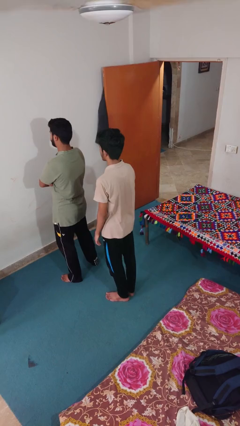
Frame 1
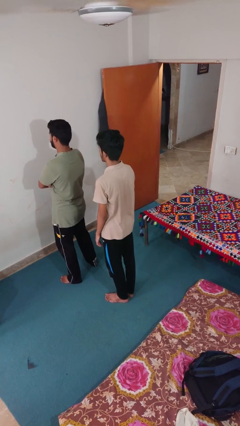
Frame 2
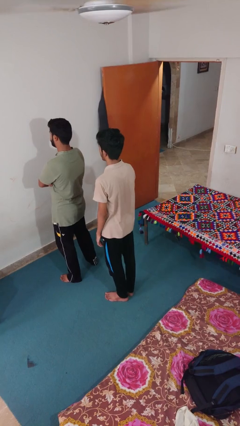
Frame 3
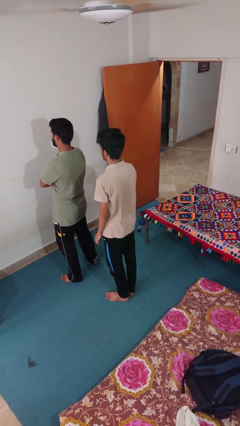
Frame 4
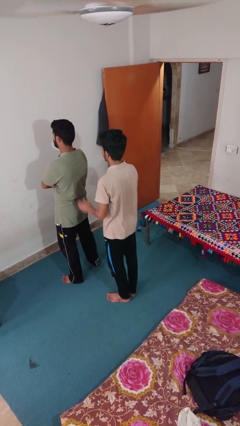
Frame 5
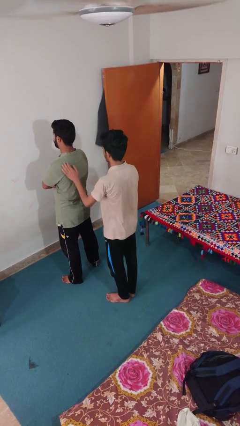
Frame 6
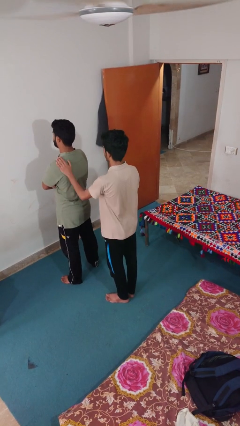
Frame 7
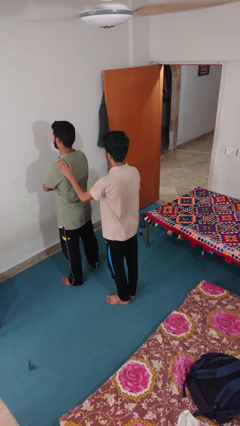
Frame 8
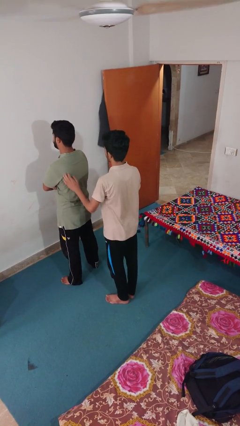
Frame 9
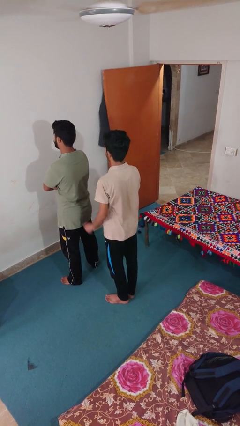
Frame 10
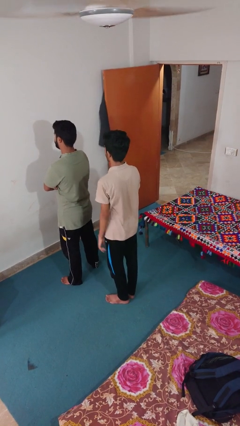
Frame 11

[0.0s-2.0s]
person touches back of person

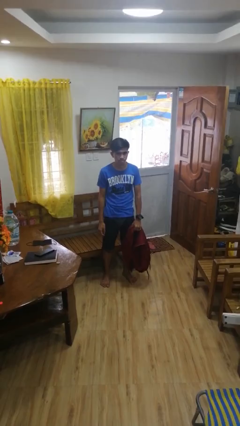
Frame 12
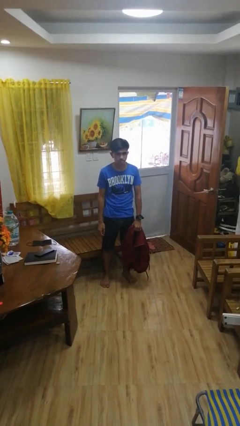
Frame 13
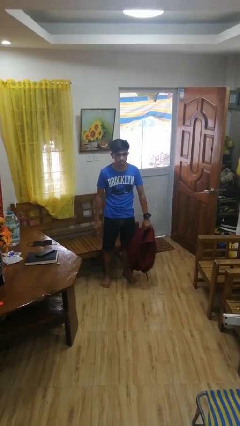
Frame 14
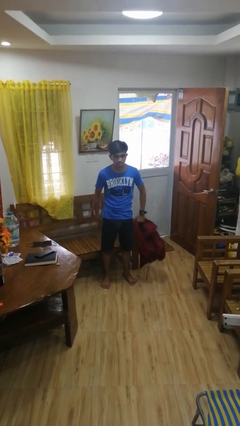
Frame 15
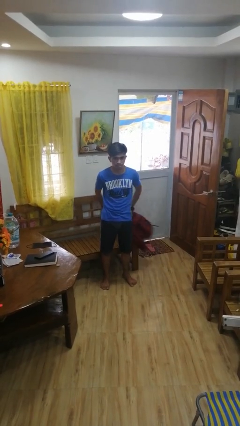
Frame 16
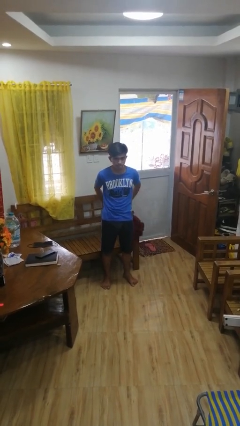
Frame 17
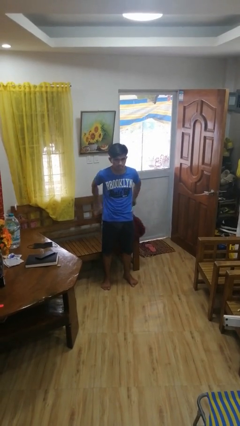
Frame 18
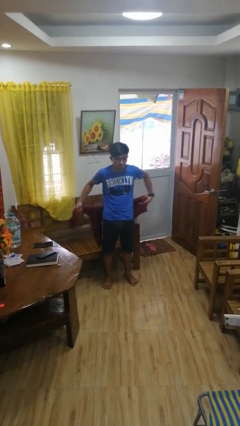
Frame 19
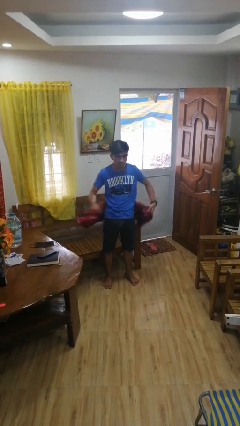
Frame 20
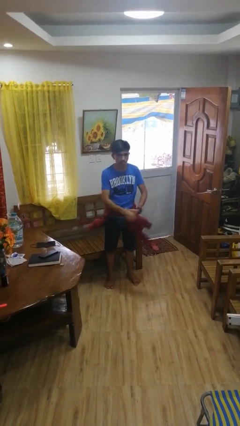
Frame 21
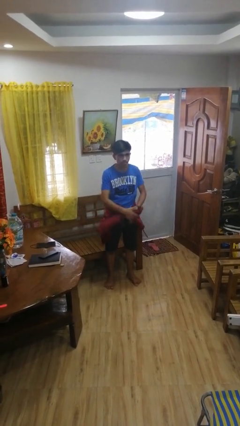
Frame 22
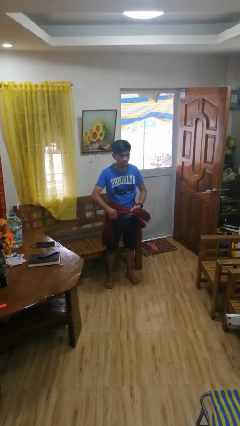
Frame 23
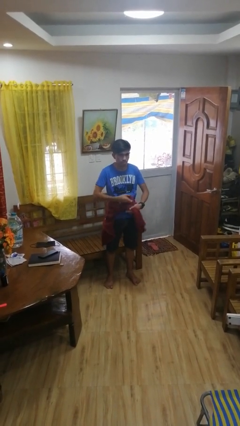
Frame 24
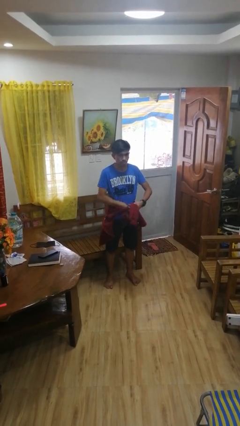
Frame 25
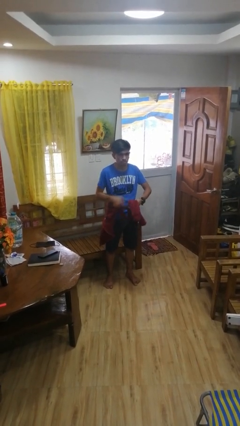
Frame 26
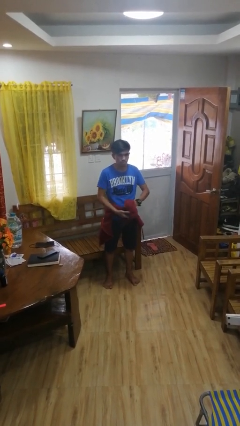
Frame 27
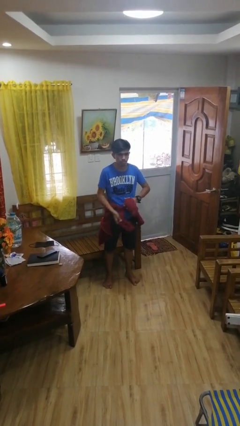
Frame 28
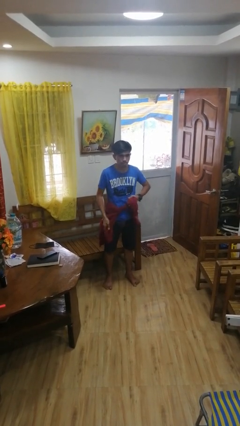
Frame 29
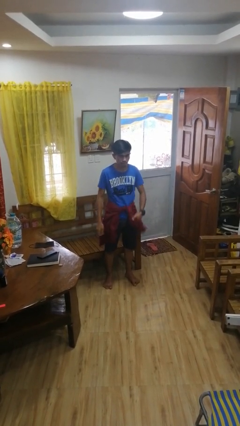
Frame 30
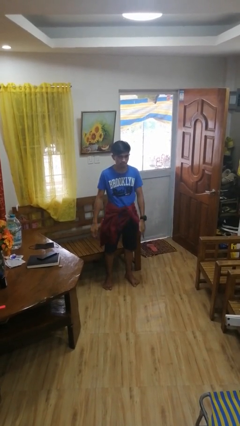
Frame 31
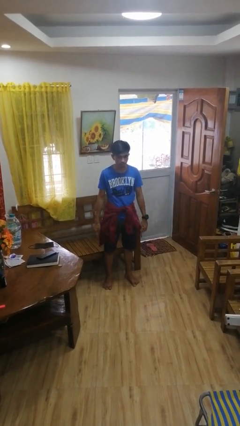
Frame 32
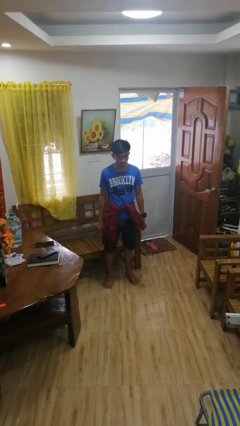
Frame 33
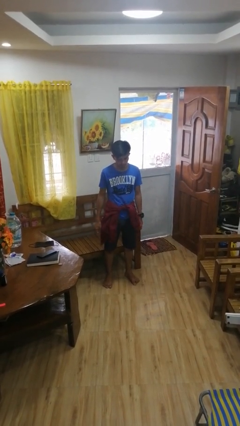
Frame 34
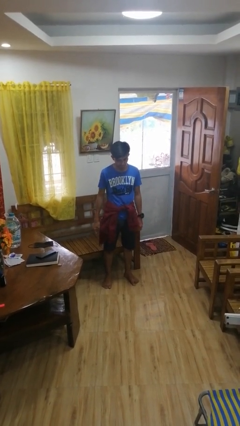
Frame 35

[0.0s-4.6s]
person ties jacket around waist

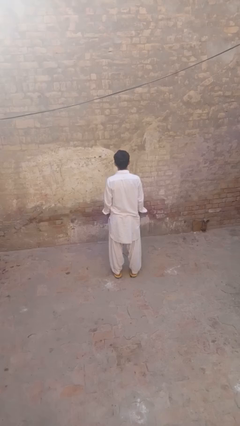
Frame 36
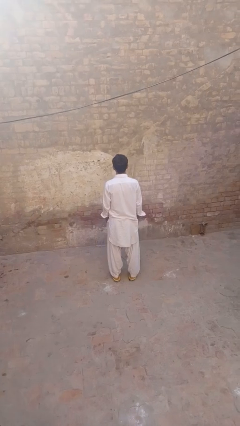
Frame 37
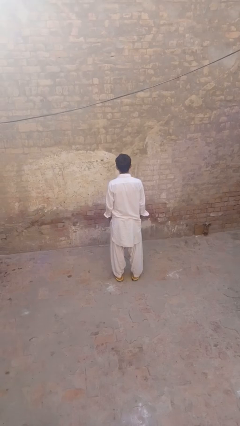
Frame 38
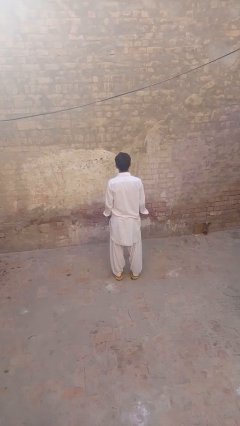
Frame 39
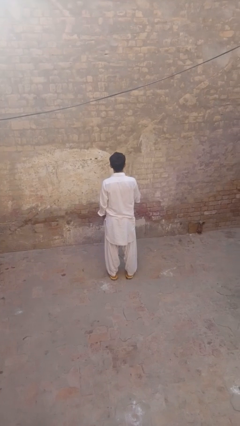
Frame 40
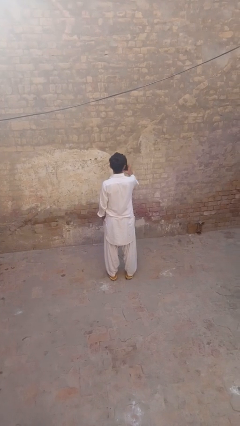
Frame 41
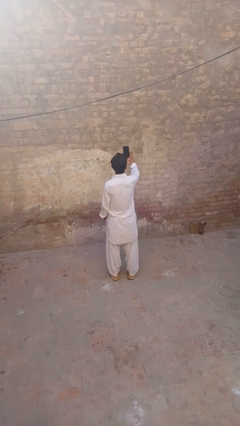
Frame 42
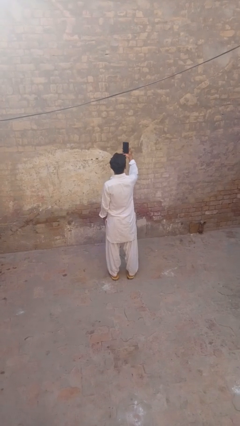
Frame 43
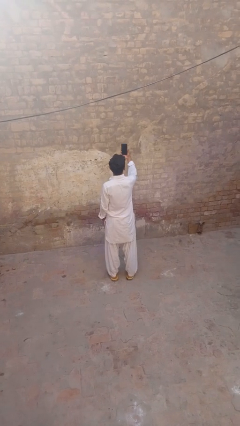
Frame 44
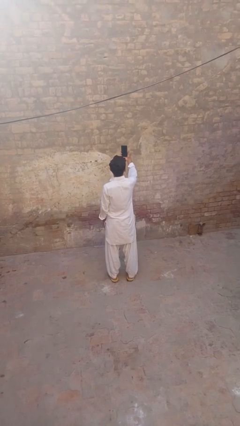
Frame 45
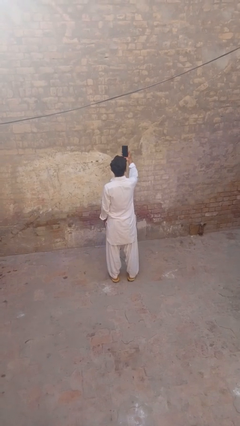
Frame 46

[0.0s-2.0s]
person takes selfie

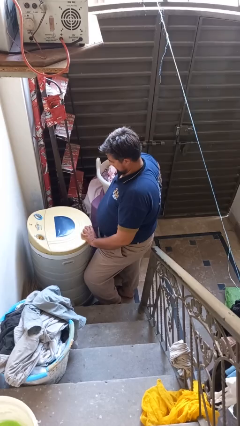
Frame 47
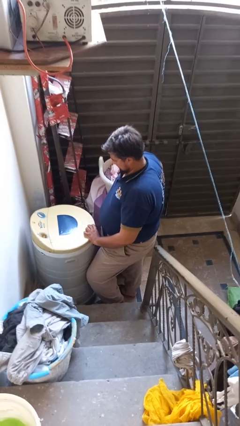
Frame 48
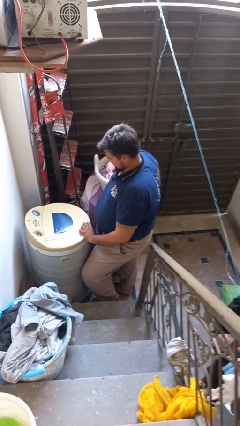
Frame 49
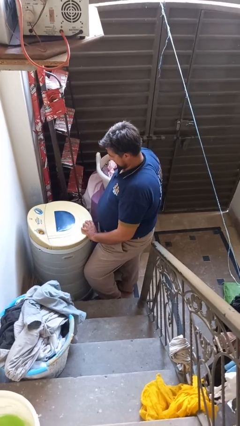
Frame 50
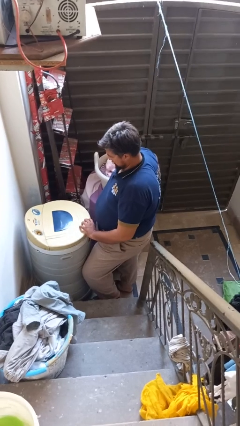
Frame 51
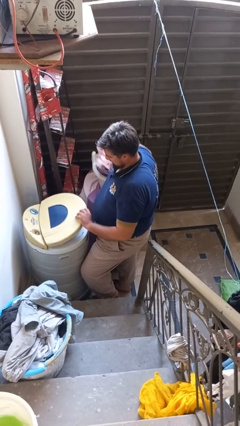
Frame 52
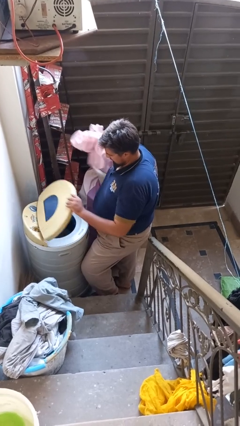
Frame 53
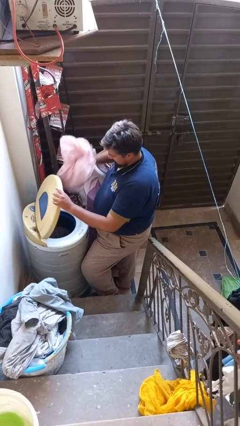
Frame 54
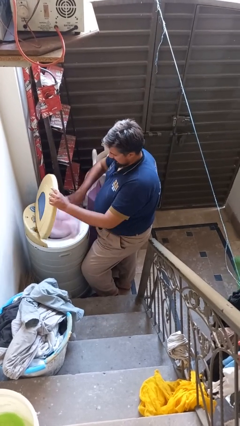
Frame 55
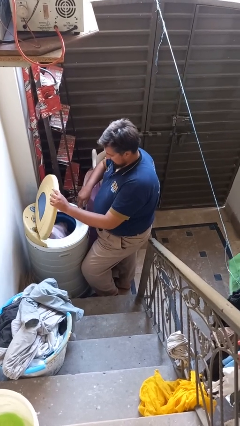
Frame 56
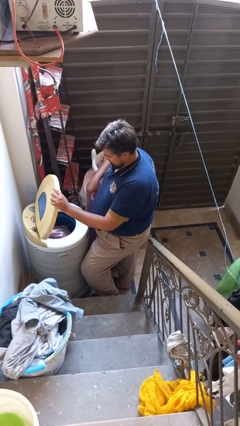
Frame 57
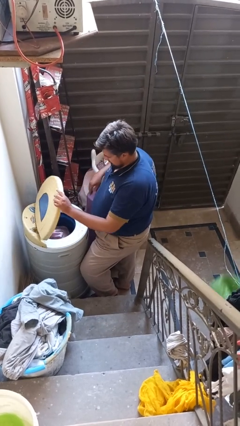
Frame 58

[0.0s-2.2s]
person loads dryer

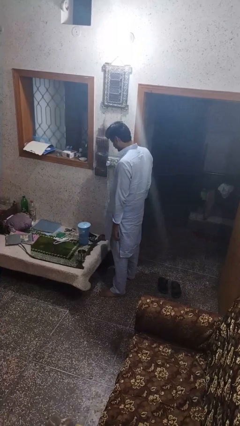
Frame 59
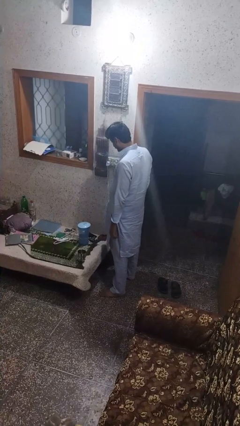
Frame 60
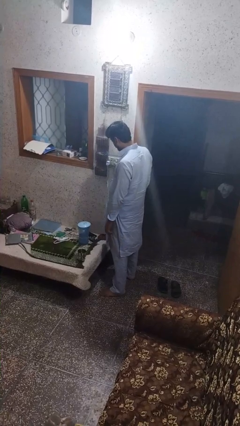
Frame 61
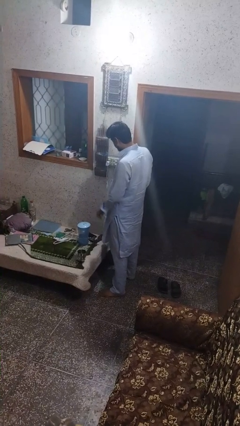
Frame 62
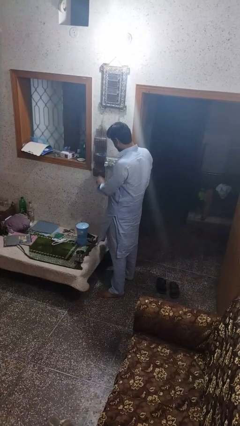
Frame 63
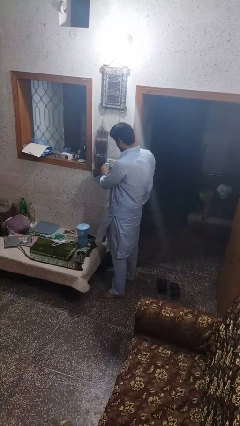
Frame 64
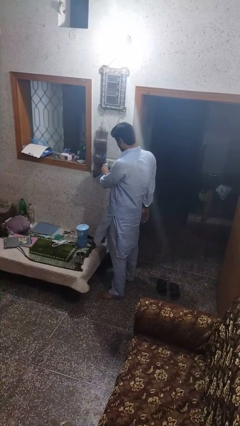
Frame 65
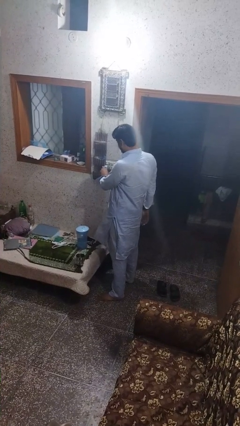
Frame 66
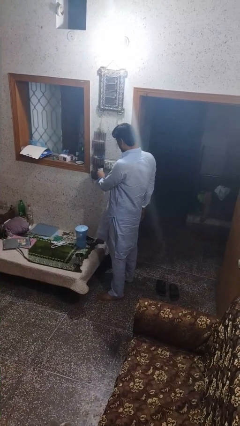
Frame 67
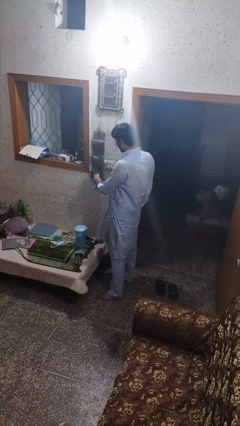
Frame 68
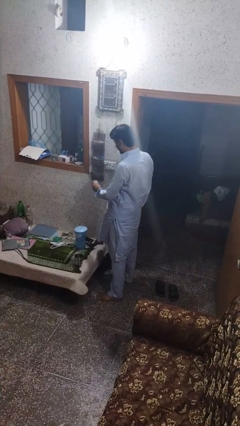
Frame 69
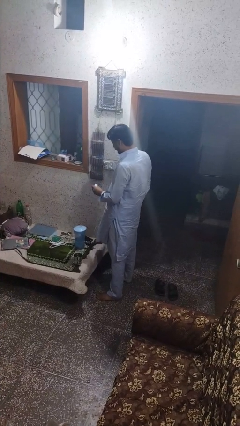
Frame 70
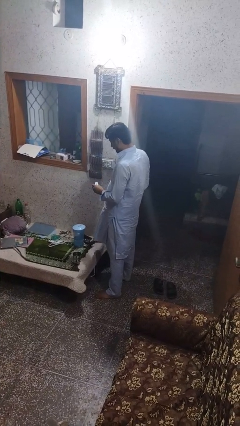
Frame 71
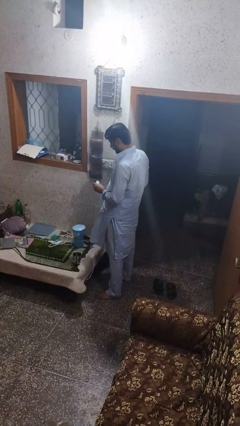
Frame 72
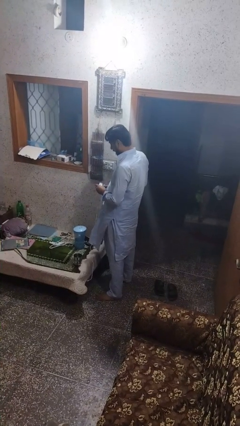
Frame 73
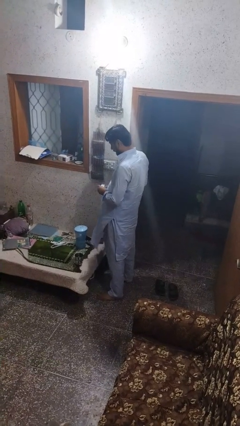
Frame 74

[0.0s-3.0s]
person unplugs from electrical socket

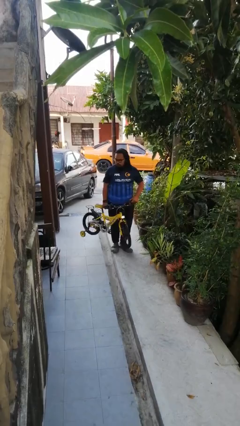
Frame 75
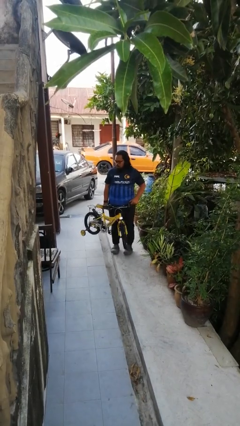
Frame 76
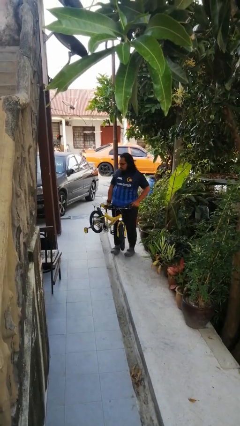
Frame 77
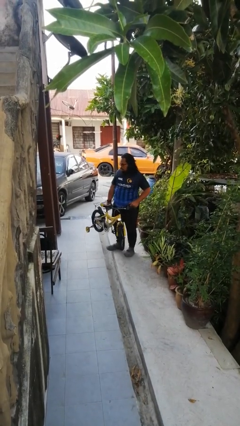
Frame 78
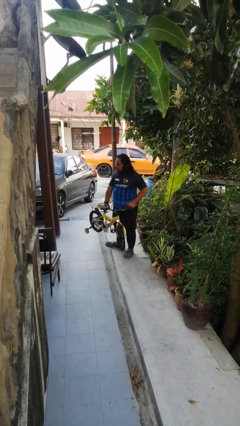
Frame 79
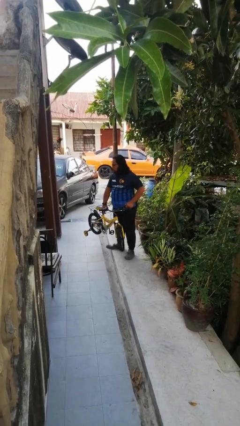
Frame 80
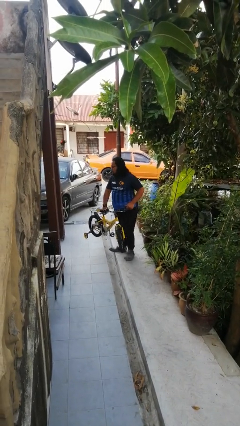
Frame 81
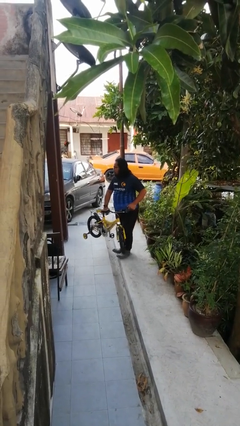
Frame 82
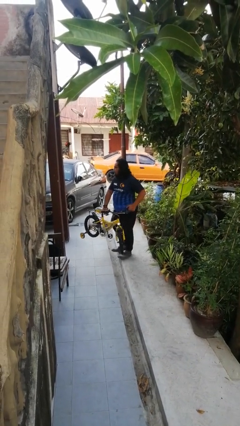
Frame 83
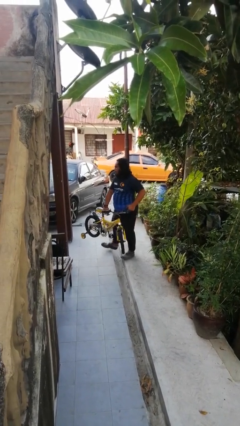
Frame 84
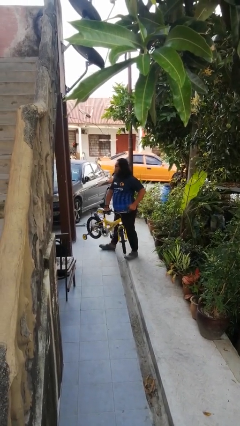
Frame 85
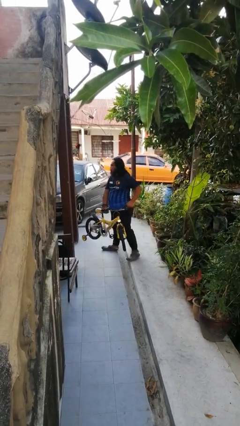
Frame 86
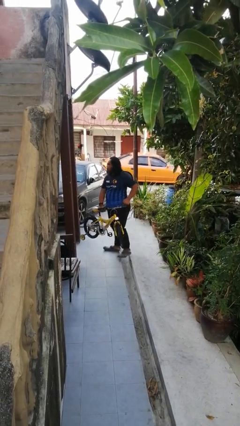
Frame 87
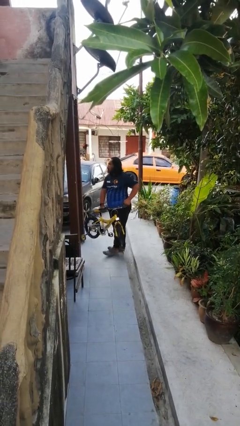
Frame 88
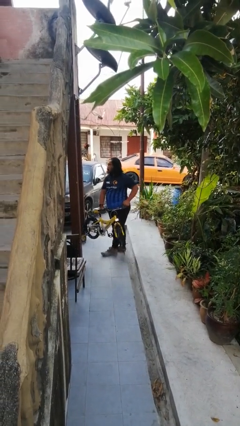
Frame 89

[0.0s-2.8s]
person carries bicycle

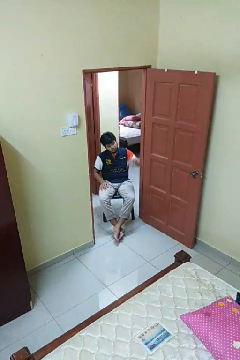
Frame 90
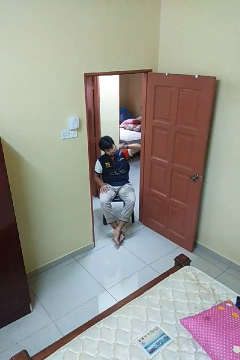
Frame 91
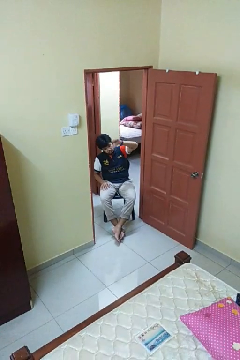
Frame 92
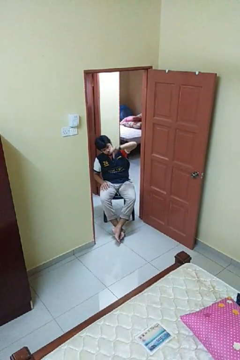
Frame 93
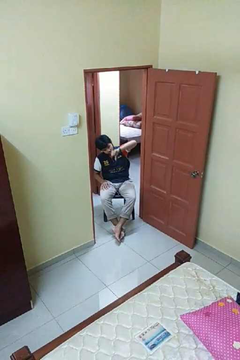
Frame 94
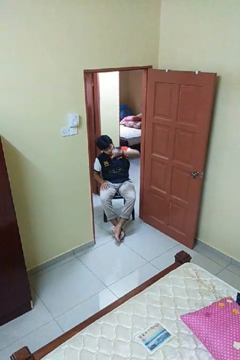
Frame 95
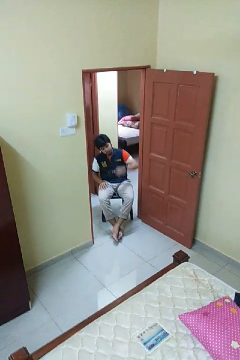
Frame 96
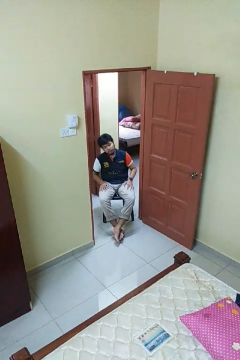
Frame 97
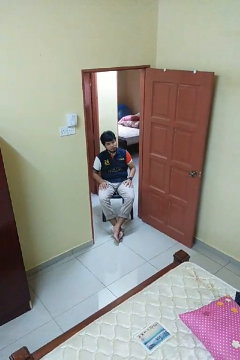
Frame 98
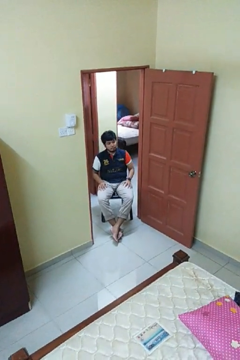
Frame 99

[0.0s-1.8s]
person gestures thumbs down
